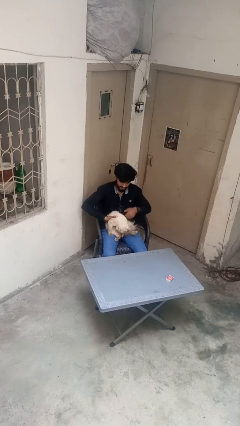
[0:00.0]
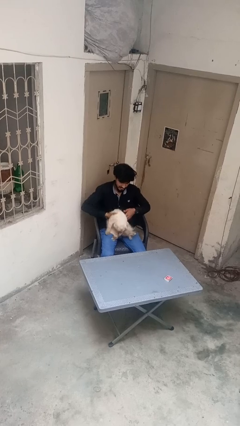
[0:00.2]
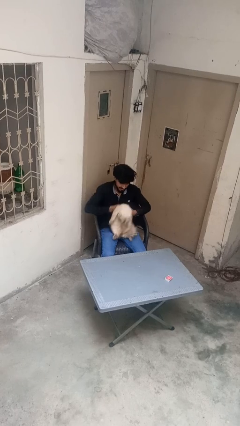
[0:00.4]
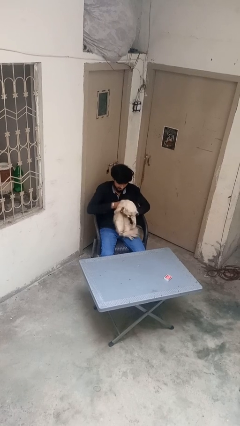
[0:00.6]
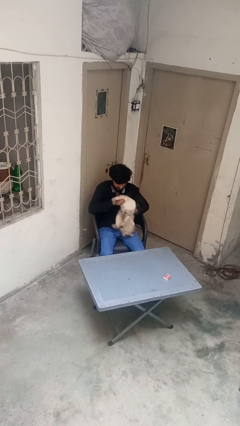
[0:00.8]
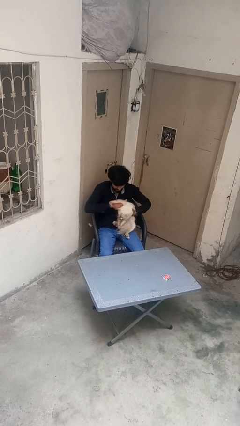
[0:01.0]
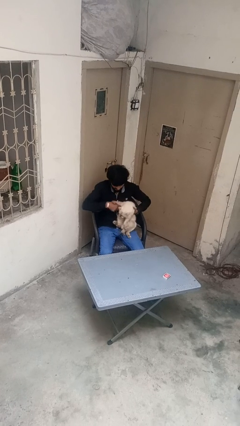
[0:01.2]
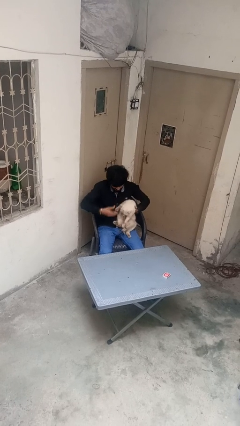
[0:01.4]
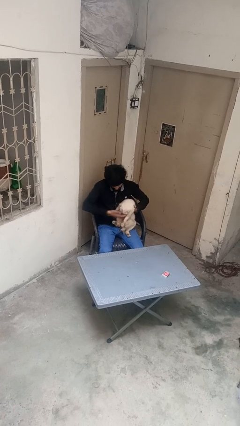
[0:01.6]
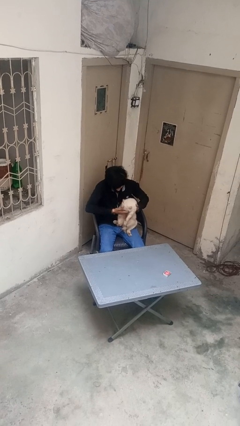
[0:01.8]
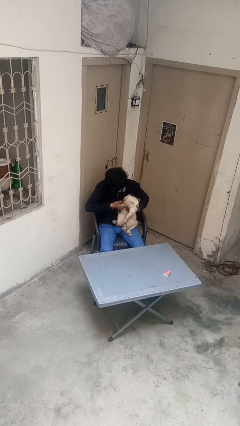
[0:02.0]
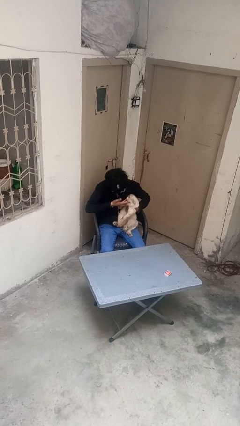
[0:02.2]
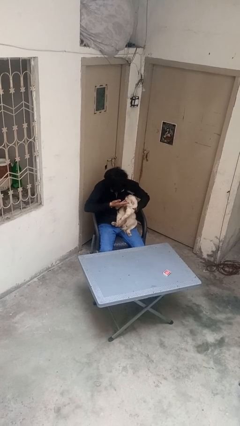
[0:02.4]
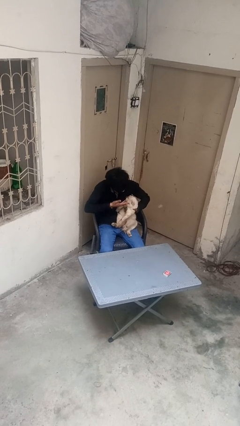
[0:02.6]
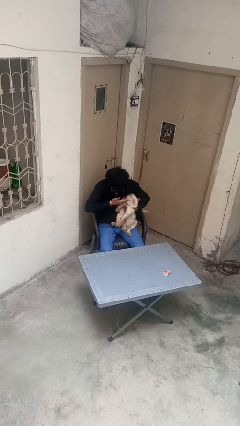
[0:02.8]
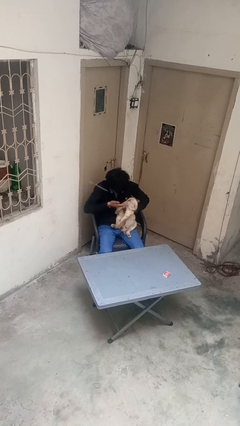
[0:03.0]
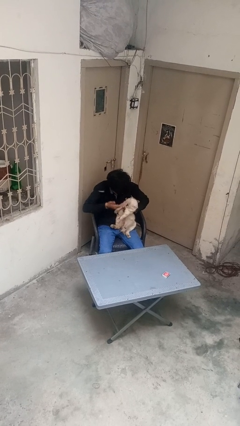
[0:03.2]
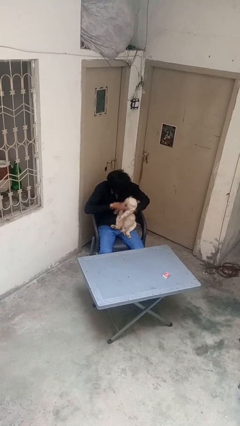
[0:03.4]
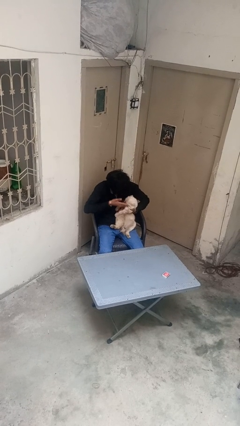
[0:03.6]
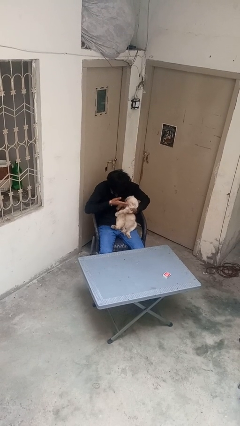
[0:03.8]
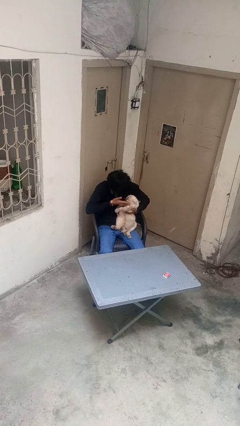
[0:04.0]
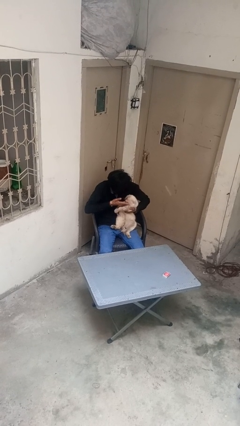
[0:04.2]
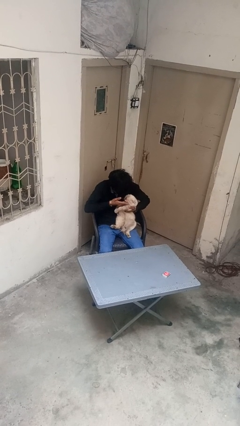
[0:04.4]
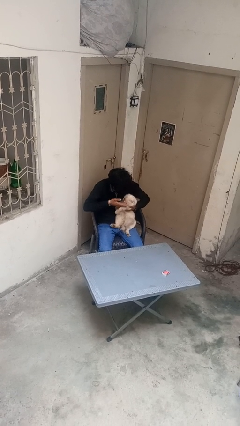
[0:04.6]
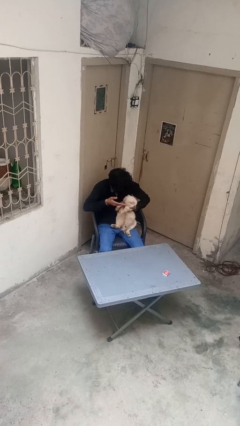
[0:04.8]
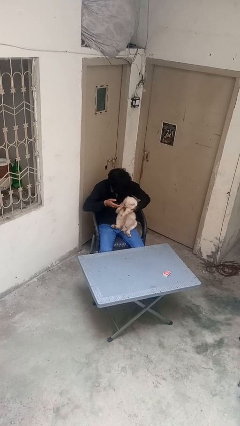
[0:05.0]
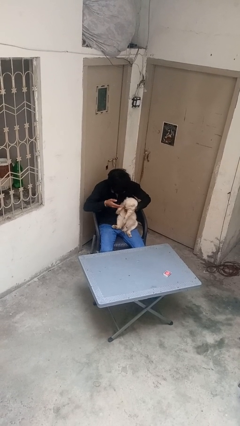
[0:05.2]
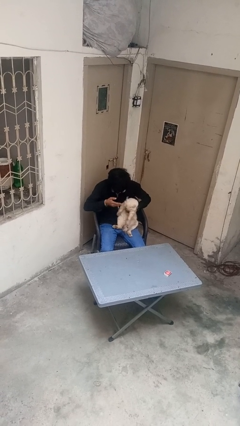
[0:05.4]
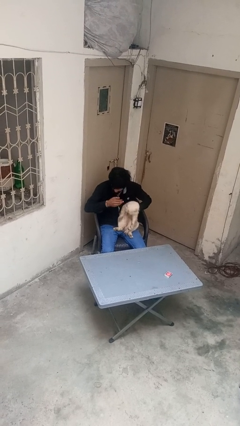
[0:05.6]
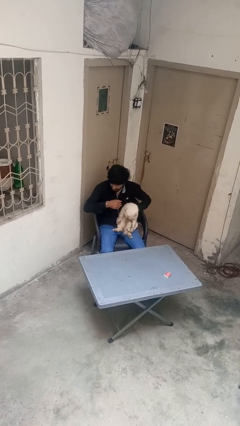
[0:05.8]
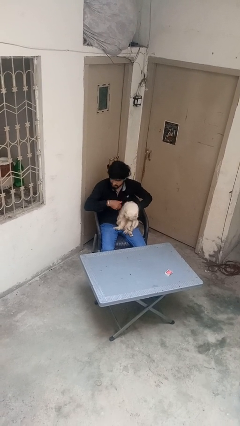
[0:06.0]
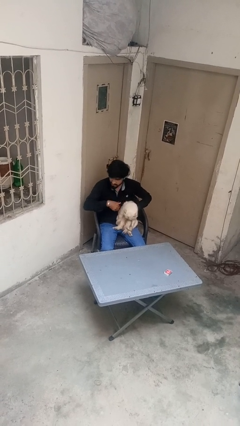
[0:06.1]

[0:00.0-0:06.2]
person pets cat

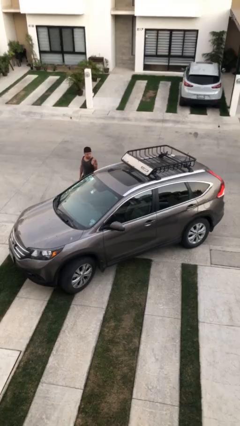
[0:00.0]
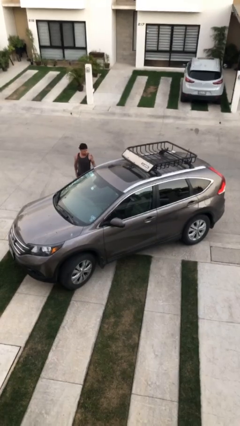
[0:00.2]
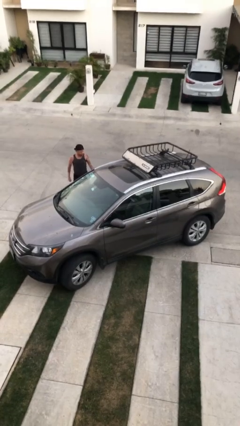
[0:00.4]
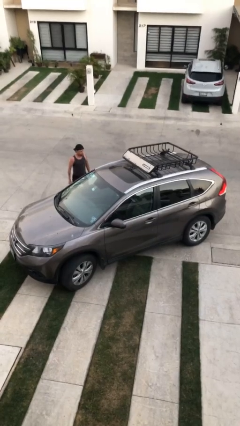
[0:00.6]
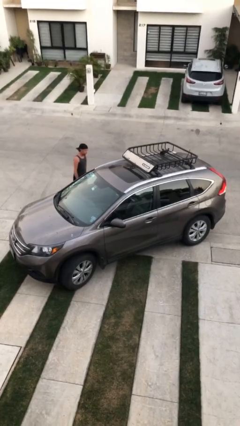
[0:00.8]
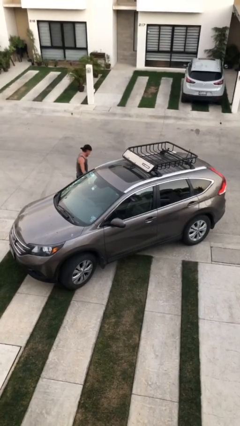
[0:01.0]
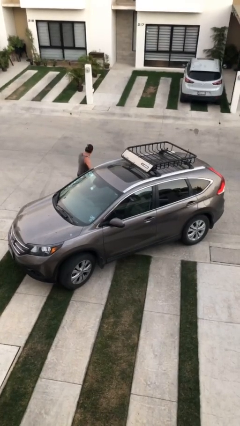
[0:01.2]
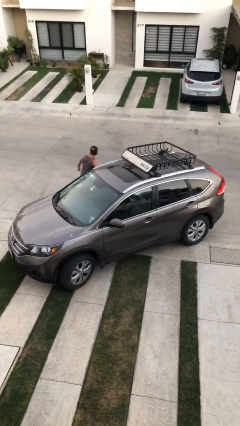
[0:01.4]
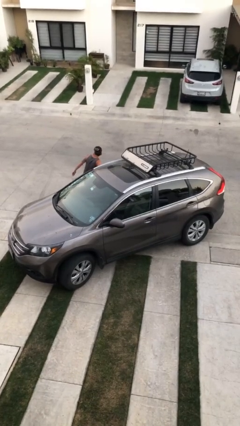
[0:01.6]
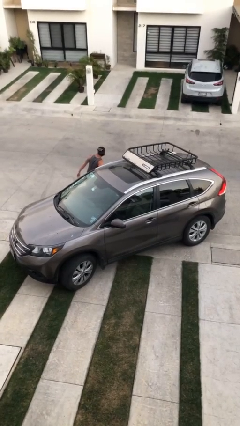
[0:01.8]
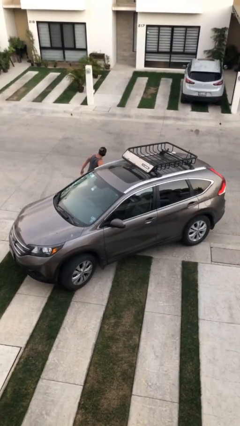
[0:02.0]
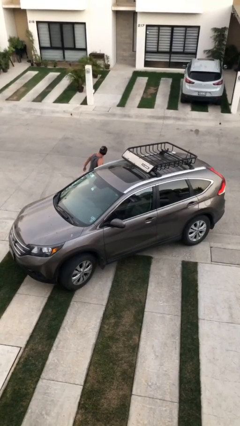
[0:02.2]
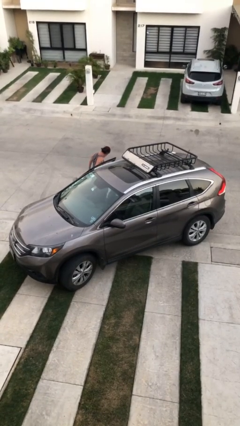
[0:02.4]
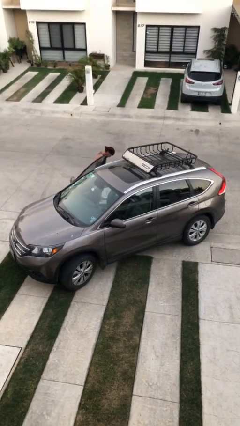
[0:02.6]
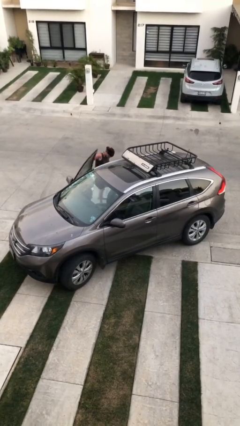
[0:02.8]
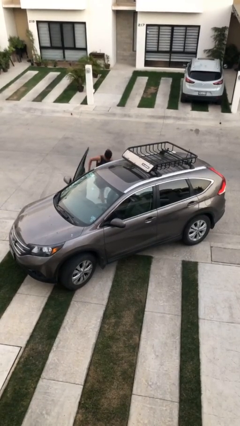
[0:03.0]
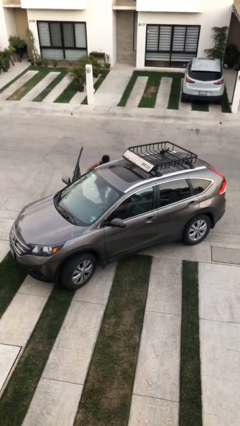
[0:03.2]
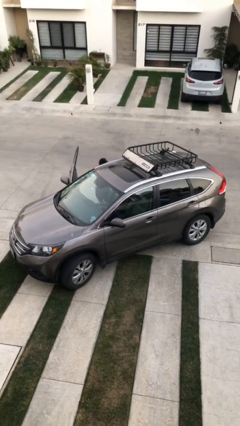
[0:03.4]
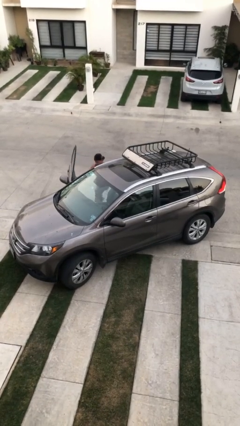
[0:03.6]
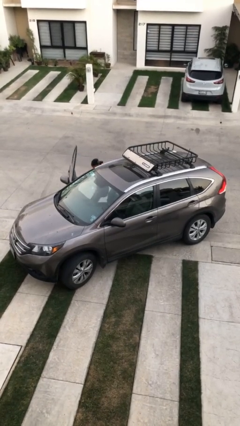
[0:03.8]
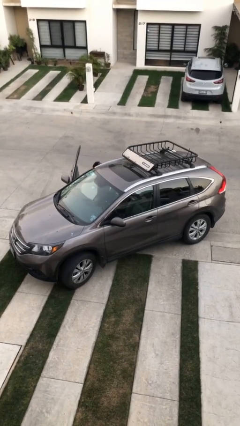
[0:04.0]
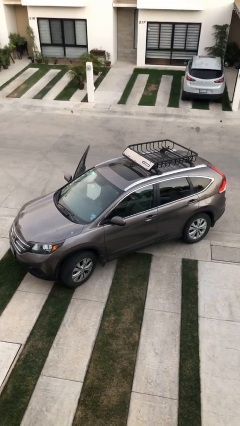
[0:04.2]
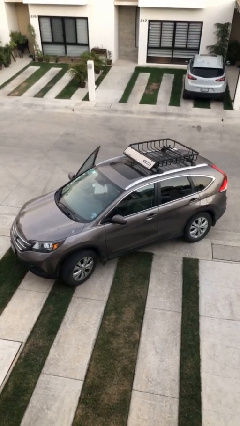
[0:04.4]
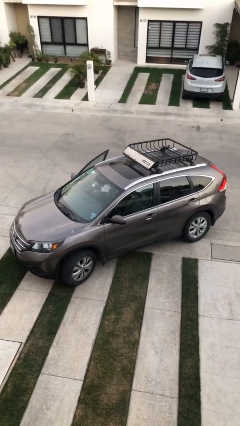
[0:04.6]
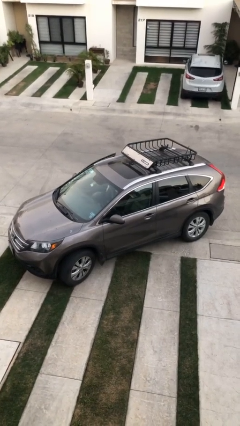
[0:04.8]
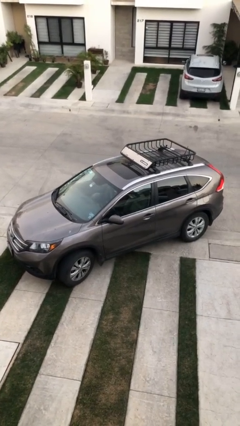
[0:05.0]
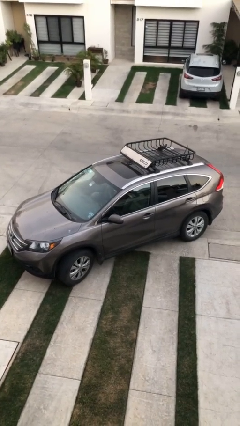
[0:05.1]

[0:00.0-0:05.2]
car picks up person

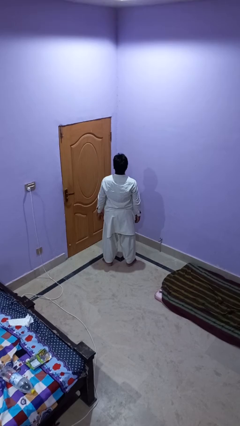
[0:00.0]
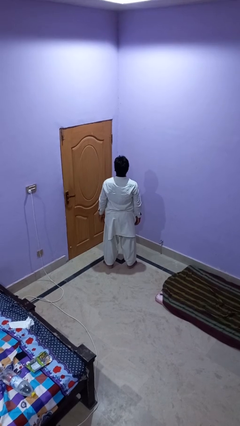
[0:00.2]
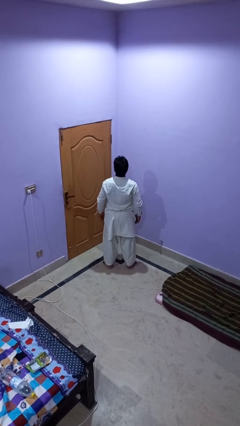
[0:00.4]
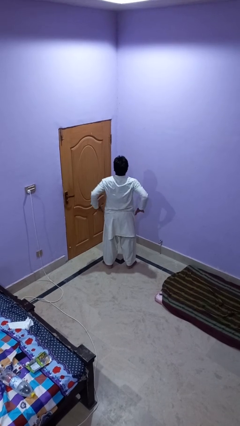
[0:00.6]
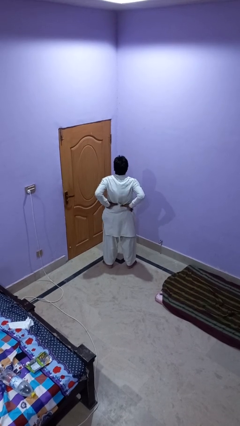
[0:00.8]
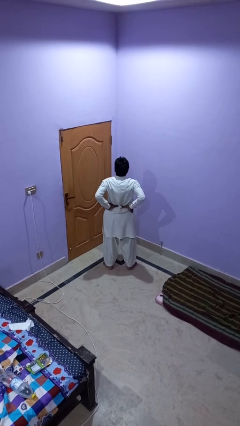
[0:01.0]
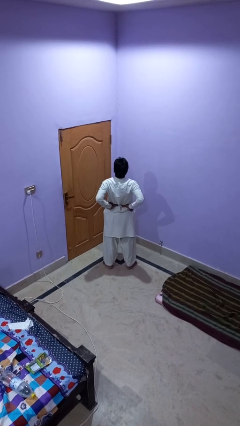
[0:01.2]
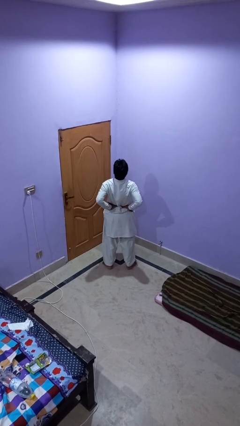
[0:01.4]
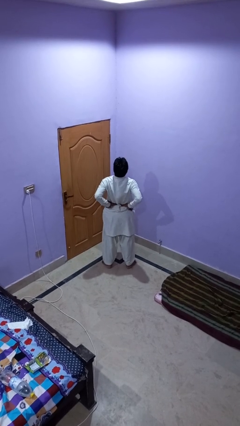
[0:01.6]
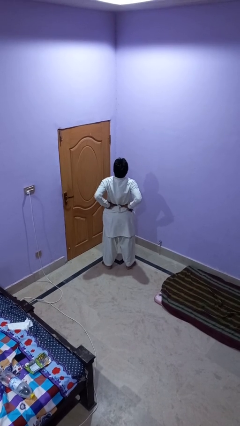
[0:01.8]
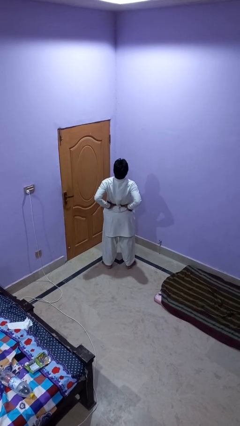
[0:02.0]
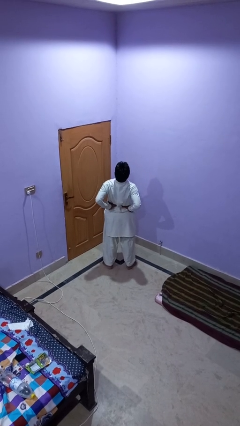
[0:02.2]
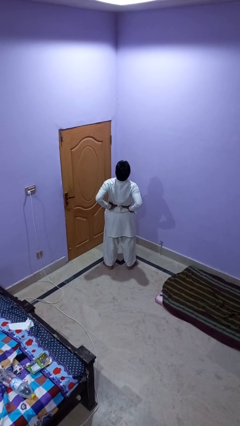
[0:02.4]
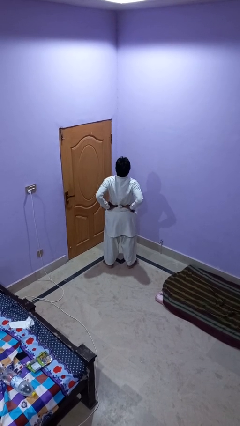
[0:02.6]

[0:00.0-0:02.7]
person stretches back

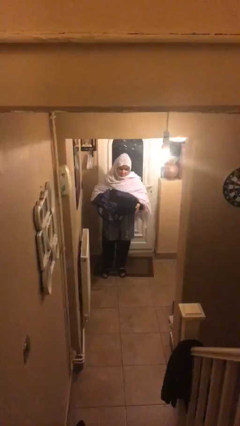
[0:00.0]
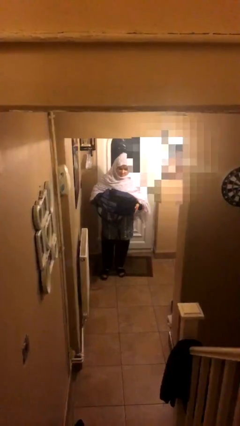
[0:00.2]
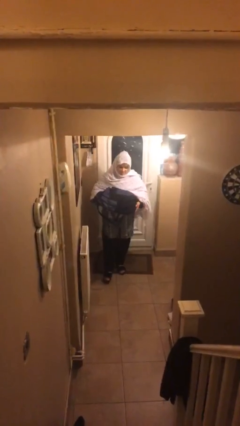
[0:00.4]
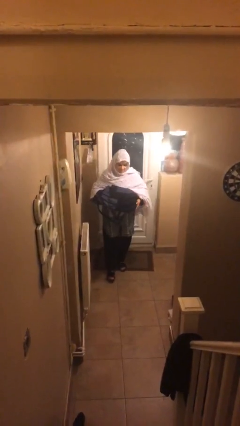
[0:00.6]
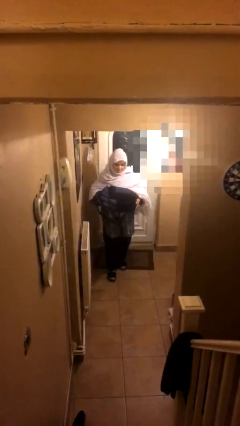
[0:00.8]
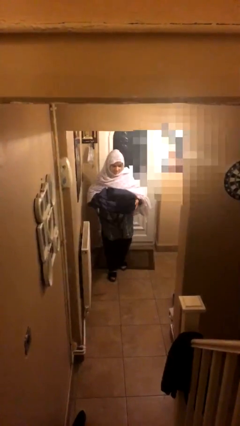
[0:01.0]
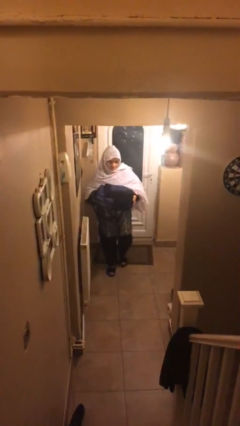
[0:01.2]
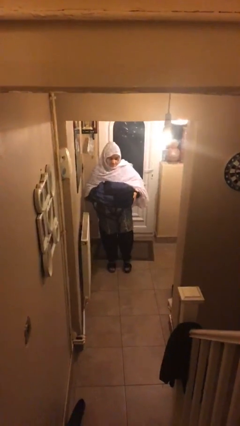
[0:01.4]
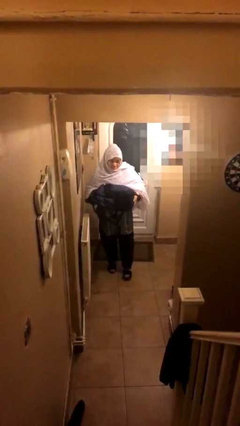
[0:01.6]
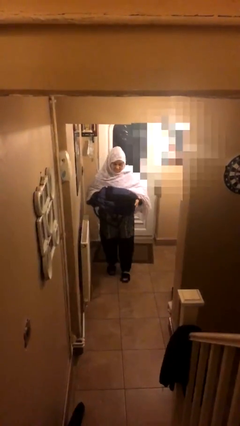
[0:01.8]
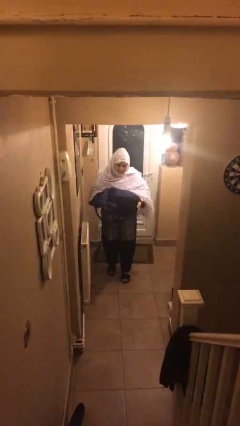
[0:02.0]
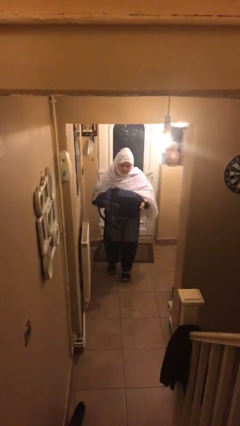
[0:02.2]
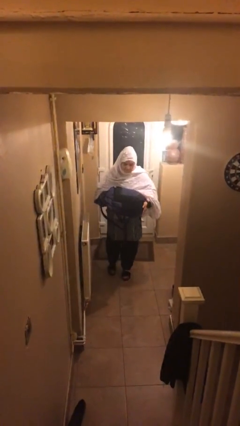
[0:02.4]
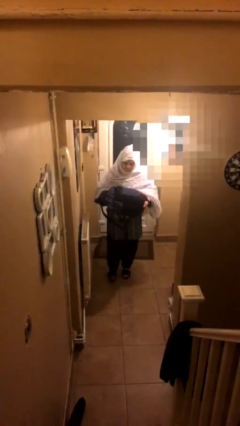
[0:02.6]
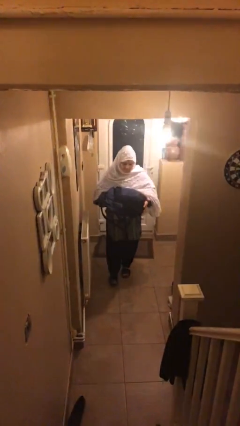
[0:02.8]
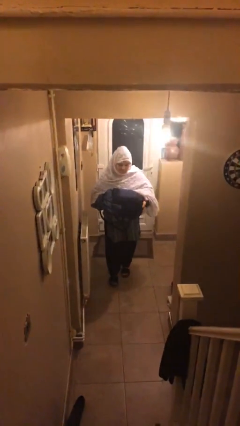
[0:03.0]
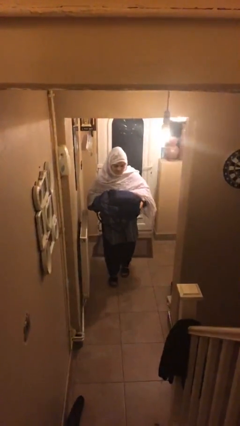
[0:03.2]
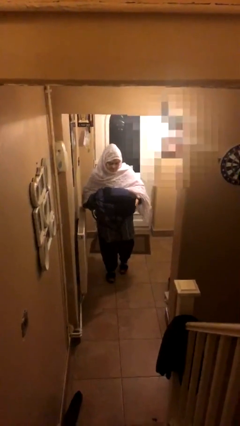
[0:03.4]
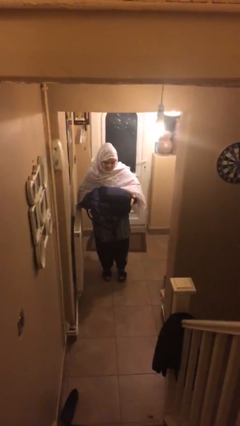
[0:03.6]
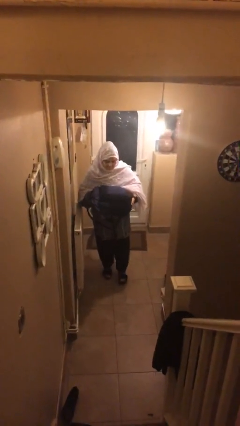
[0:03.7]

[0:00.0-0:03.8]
person carries heavy object
